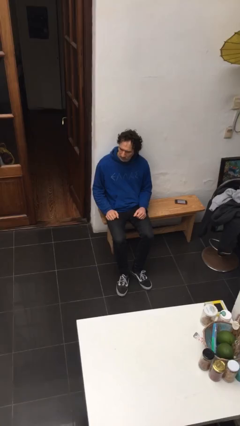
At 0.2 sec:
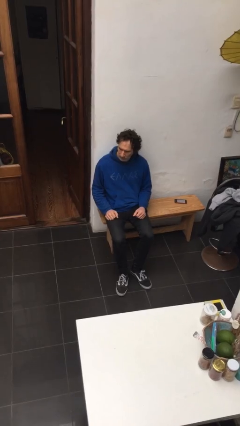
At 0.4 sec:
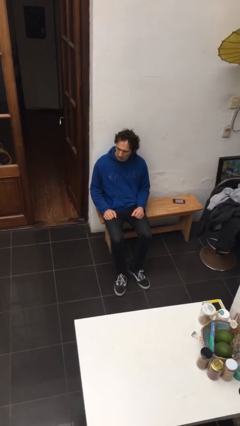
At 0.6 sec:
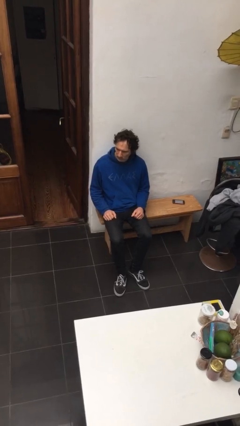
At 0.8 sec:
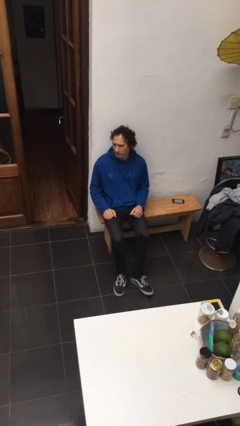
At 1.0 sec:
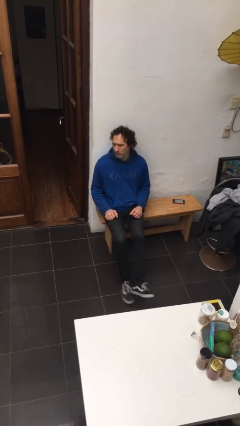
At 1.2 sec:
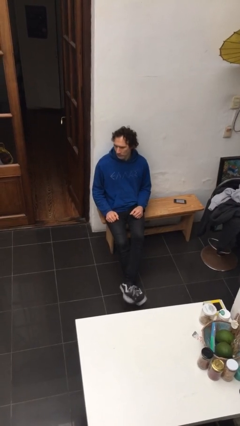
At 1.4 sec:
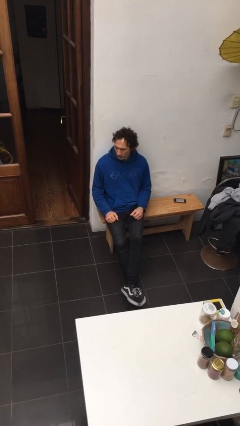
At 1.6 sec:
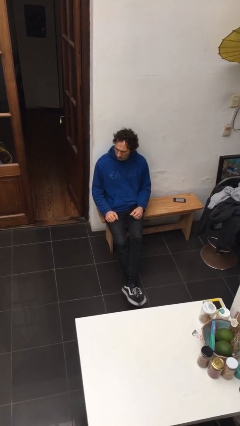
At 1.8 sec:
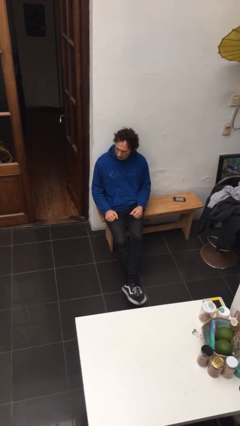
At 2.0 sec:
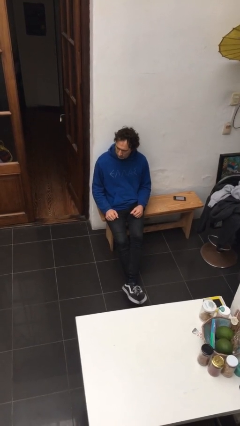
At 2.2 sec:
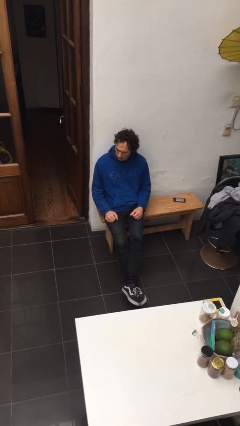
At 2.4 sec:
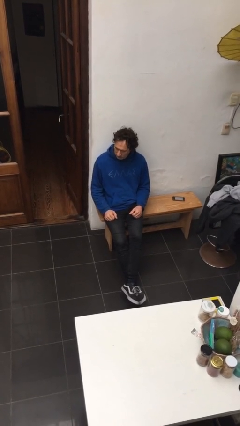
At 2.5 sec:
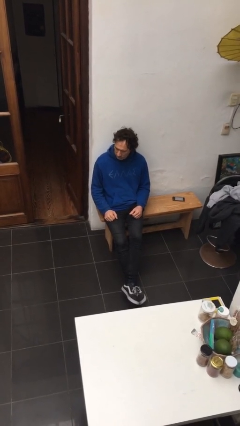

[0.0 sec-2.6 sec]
person crosses legs

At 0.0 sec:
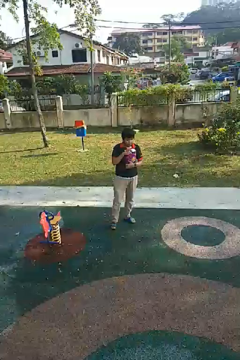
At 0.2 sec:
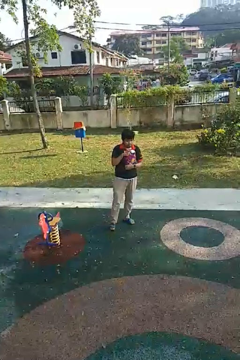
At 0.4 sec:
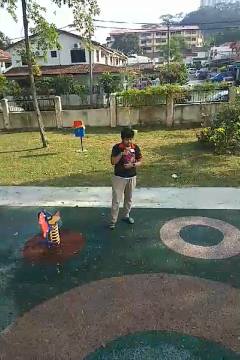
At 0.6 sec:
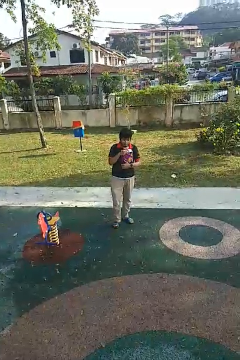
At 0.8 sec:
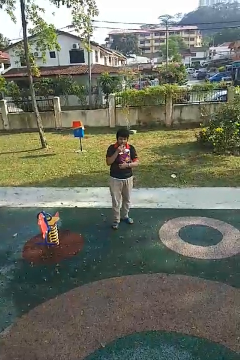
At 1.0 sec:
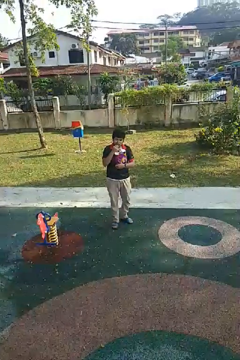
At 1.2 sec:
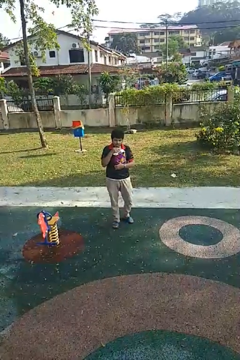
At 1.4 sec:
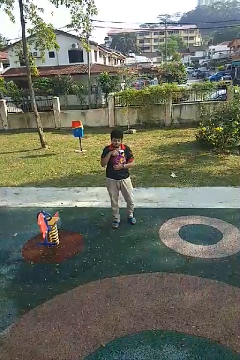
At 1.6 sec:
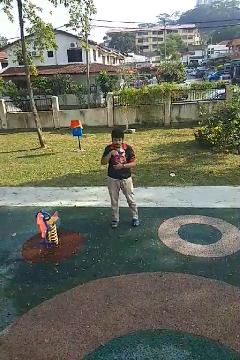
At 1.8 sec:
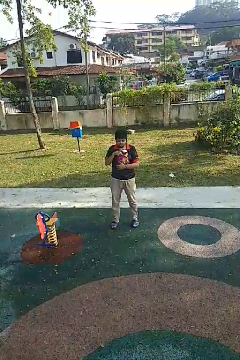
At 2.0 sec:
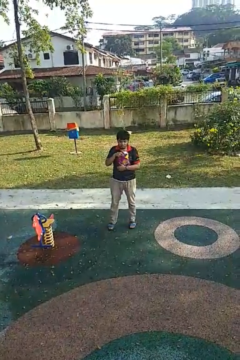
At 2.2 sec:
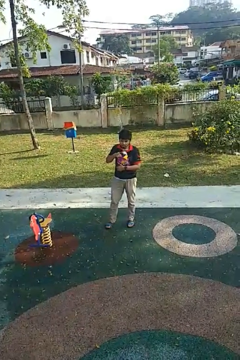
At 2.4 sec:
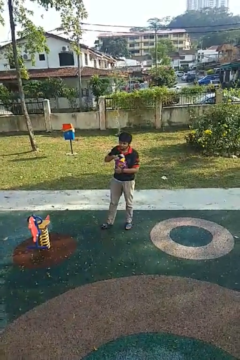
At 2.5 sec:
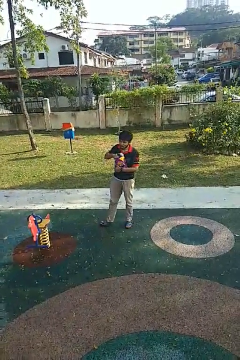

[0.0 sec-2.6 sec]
person eats snack from bag

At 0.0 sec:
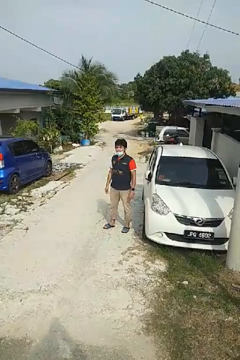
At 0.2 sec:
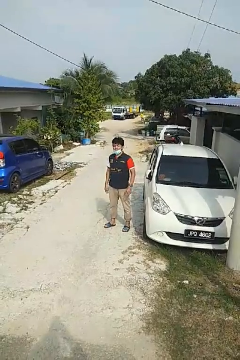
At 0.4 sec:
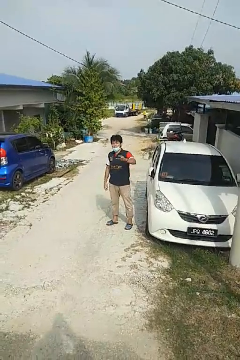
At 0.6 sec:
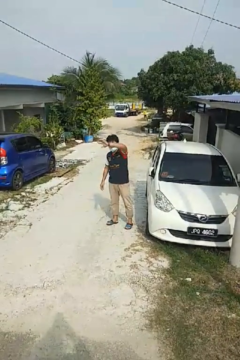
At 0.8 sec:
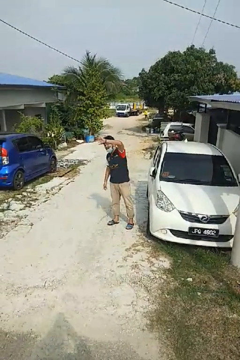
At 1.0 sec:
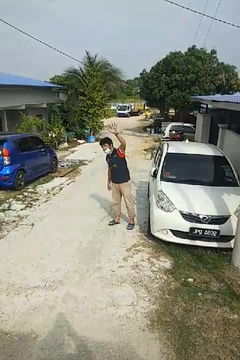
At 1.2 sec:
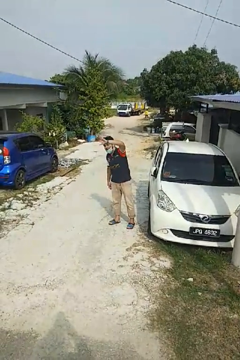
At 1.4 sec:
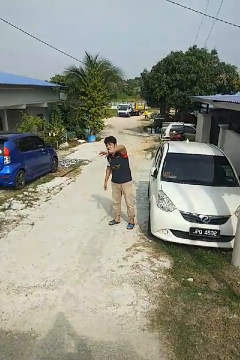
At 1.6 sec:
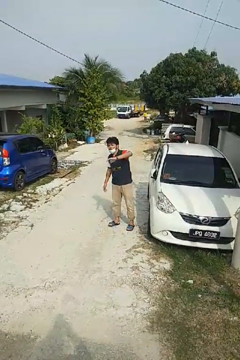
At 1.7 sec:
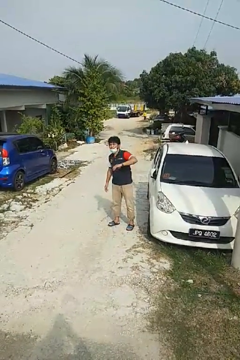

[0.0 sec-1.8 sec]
person waves at person

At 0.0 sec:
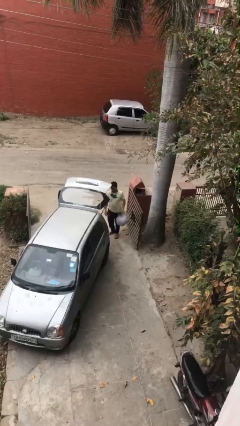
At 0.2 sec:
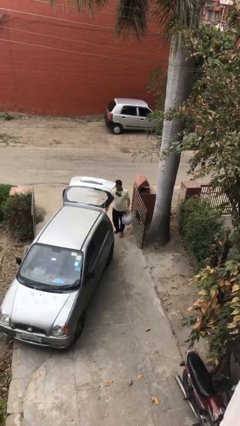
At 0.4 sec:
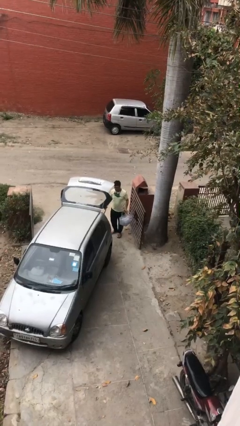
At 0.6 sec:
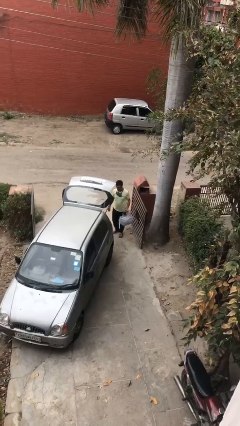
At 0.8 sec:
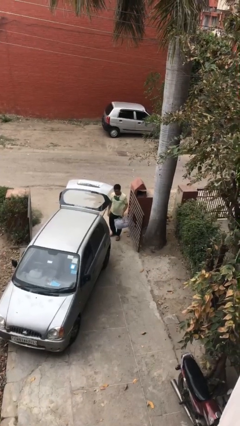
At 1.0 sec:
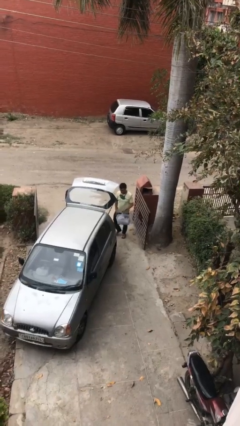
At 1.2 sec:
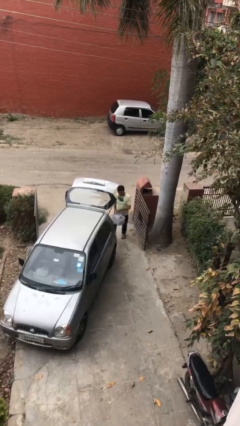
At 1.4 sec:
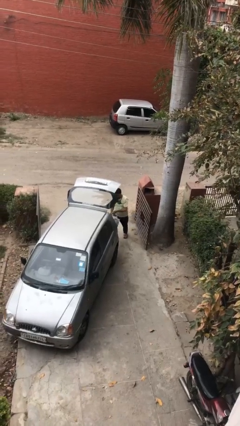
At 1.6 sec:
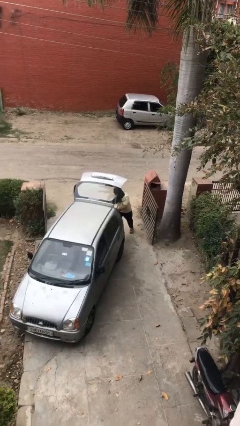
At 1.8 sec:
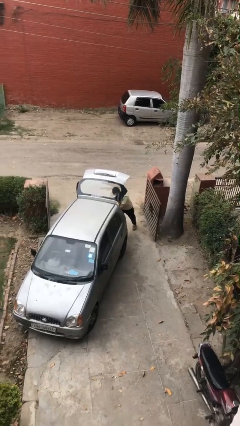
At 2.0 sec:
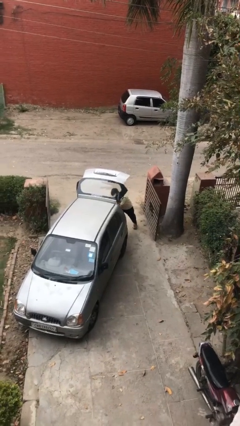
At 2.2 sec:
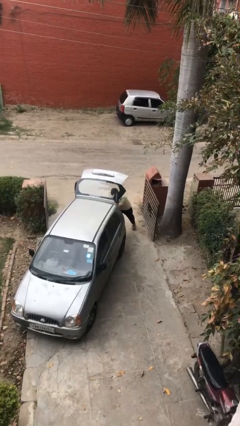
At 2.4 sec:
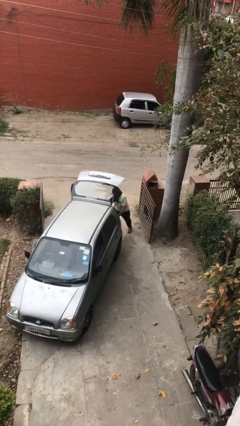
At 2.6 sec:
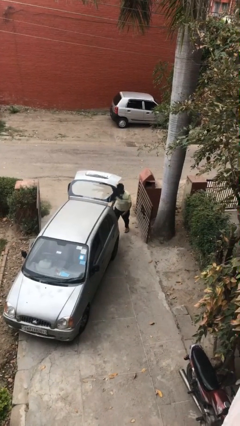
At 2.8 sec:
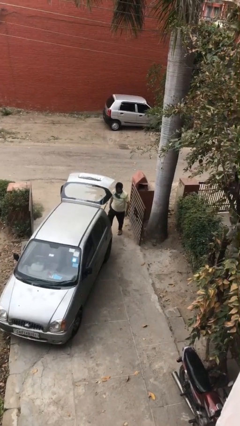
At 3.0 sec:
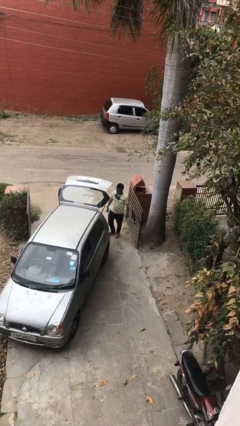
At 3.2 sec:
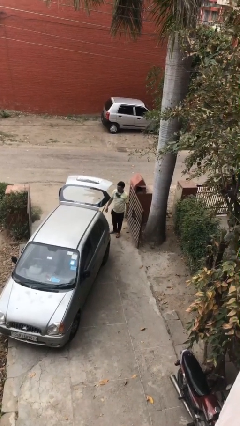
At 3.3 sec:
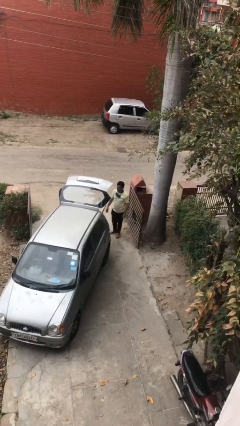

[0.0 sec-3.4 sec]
person loads car

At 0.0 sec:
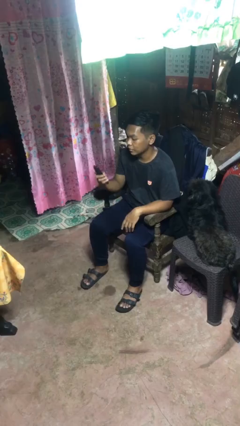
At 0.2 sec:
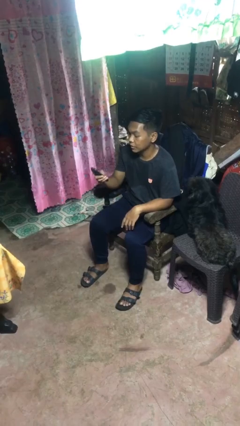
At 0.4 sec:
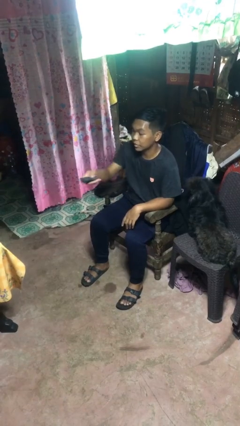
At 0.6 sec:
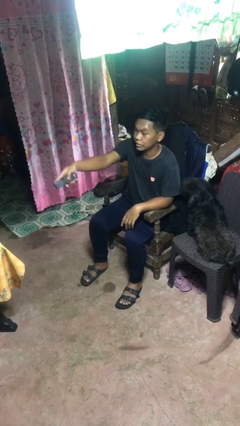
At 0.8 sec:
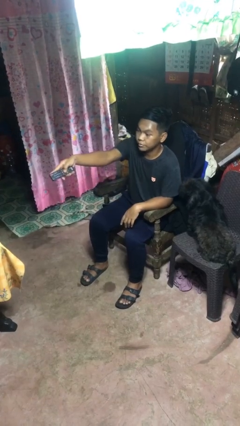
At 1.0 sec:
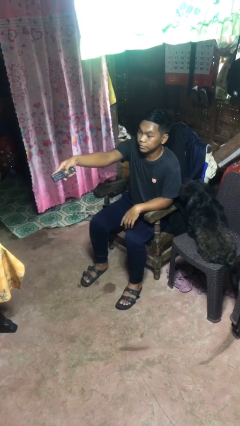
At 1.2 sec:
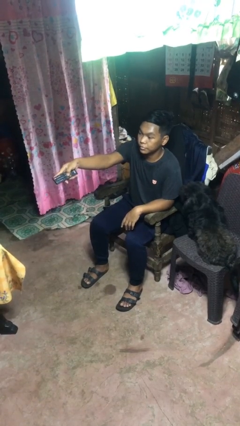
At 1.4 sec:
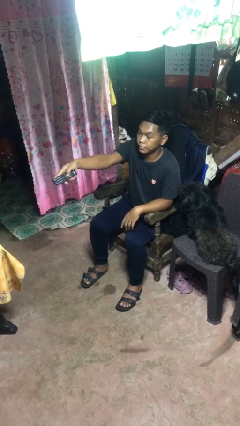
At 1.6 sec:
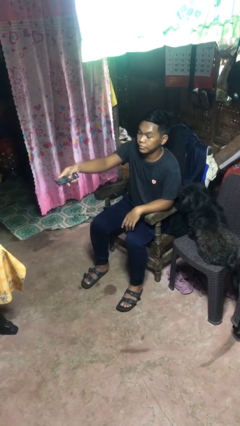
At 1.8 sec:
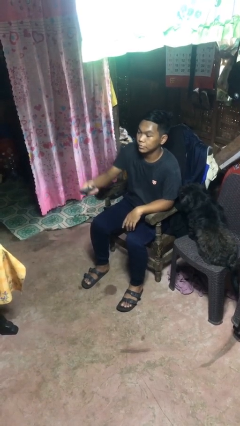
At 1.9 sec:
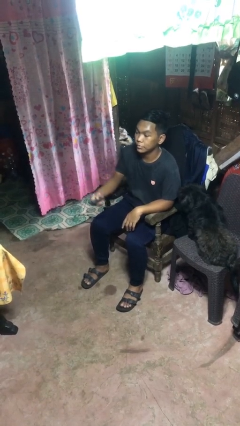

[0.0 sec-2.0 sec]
person uses television remote

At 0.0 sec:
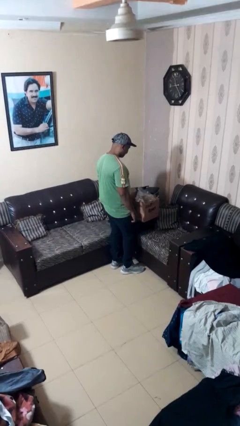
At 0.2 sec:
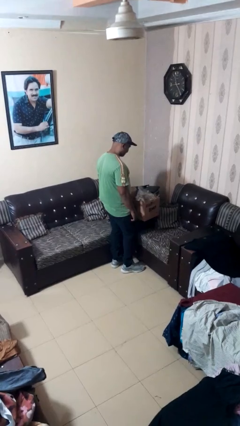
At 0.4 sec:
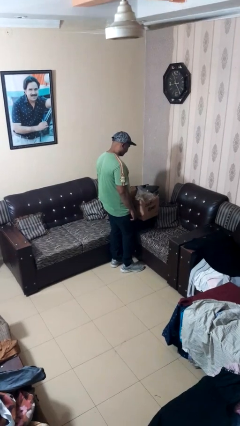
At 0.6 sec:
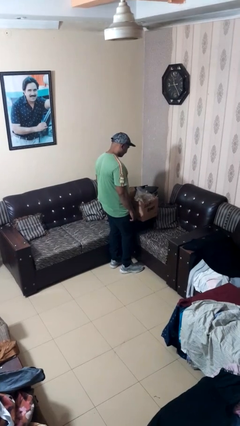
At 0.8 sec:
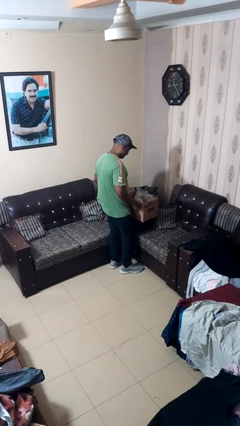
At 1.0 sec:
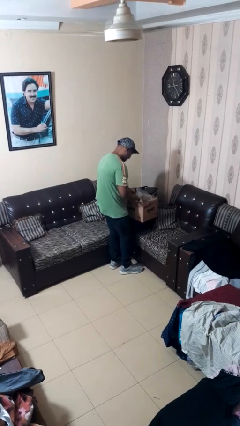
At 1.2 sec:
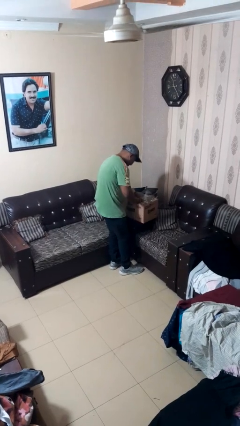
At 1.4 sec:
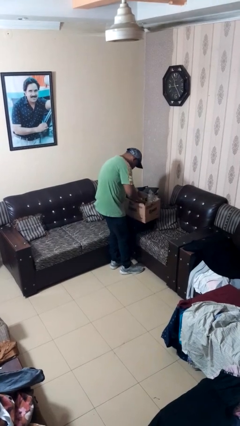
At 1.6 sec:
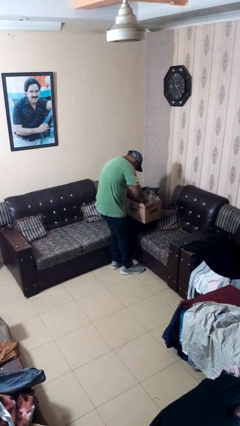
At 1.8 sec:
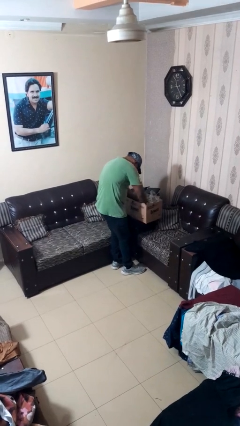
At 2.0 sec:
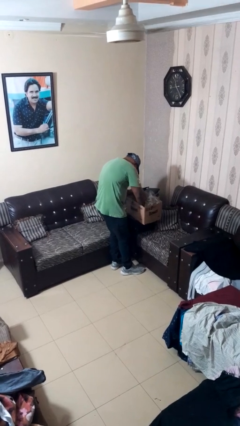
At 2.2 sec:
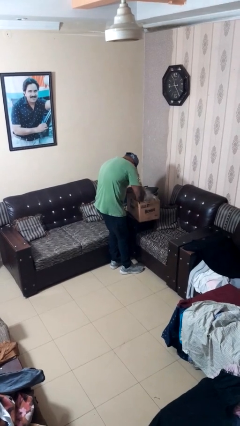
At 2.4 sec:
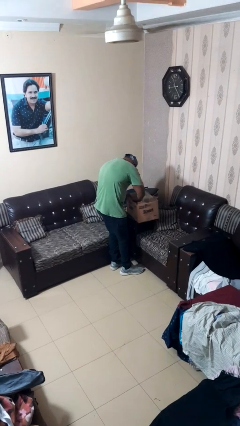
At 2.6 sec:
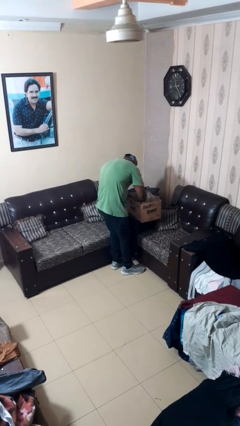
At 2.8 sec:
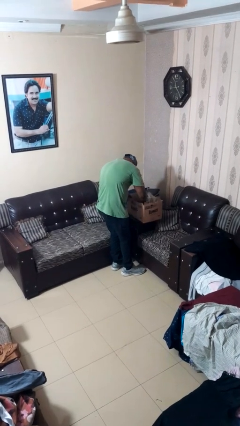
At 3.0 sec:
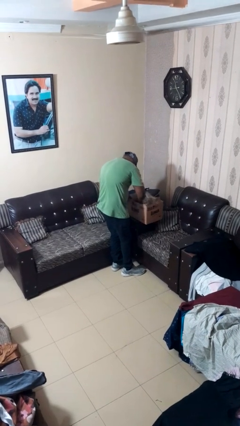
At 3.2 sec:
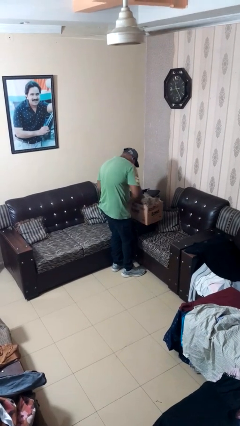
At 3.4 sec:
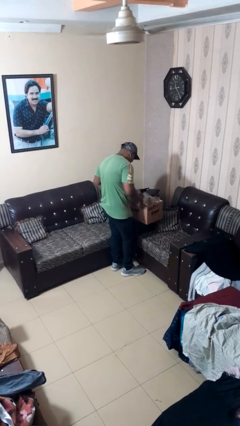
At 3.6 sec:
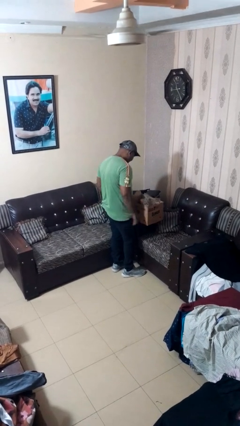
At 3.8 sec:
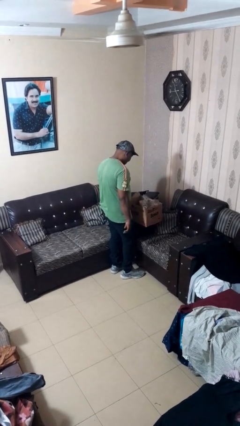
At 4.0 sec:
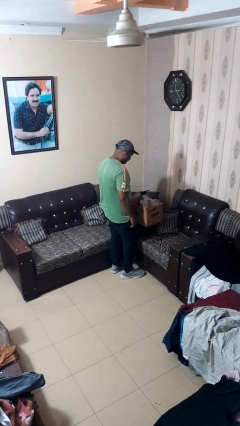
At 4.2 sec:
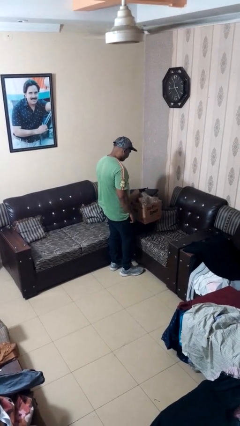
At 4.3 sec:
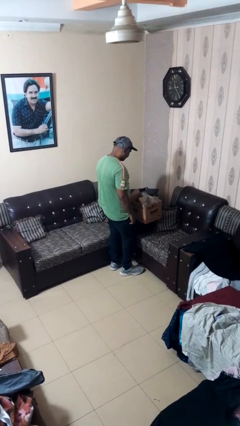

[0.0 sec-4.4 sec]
person searches in box

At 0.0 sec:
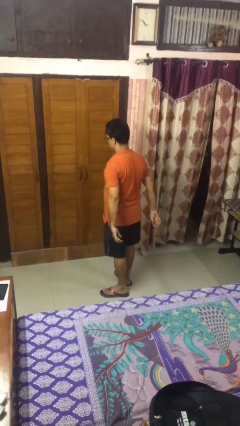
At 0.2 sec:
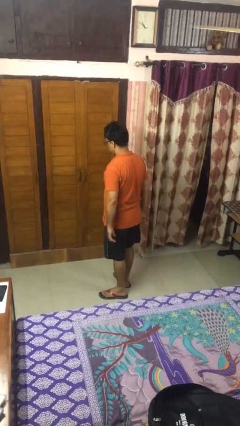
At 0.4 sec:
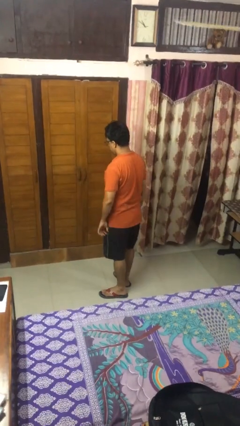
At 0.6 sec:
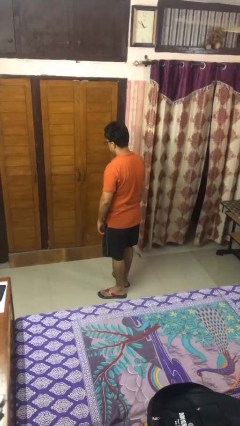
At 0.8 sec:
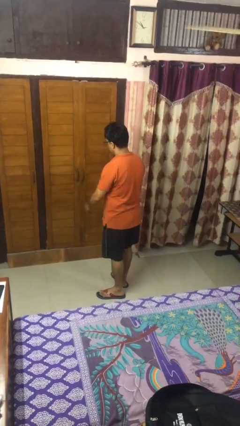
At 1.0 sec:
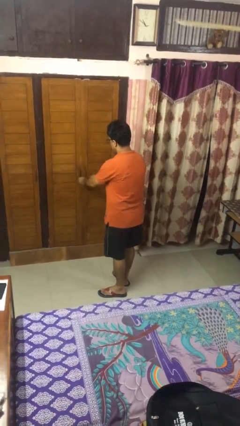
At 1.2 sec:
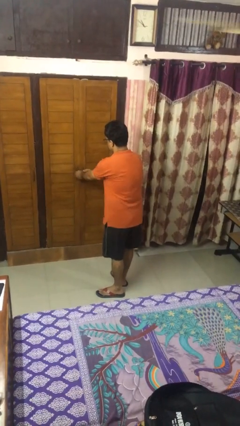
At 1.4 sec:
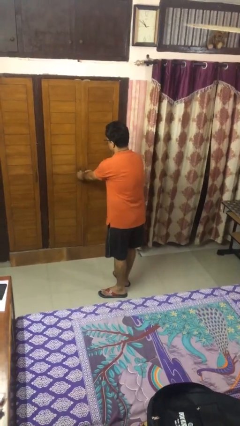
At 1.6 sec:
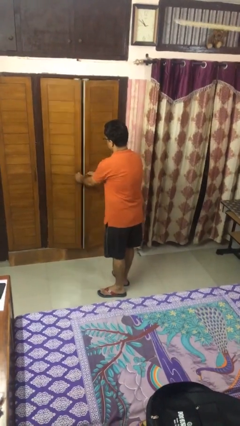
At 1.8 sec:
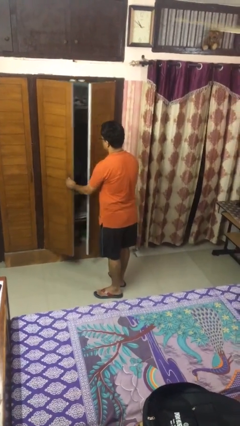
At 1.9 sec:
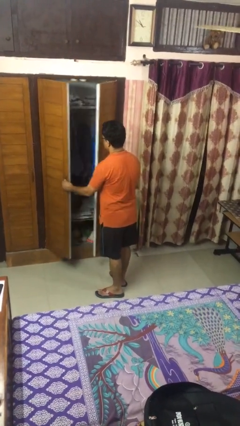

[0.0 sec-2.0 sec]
person opens closet door
